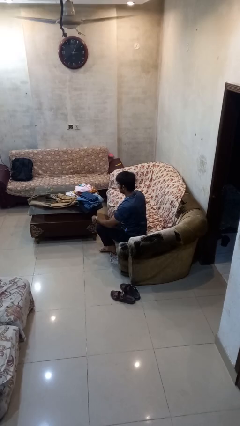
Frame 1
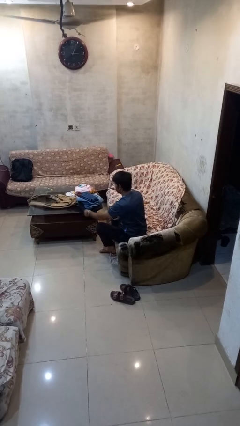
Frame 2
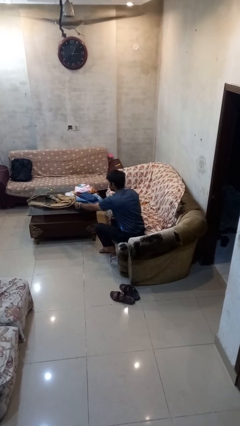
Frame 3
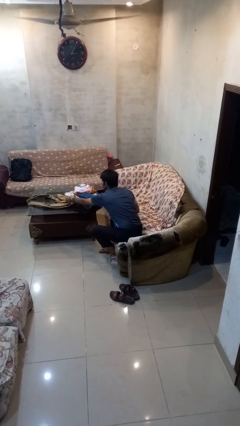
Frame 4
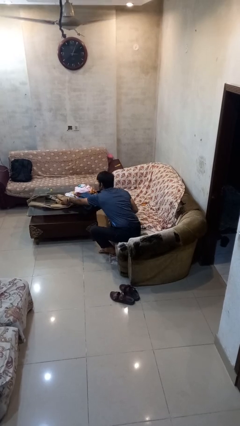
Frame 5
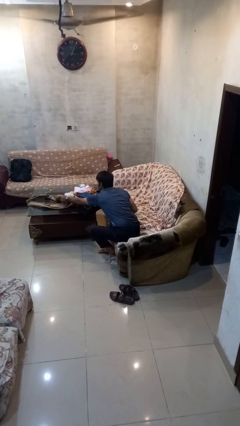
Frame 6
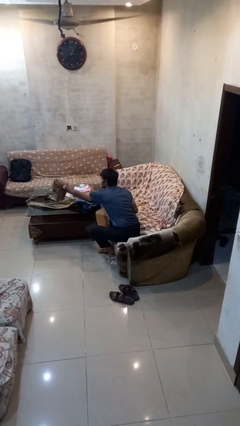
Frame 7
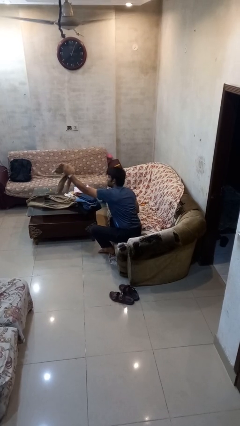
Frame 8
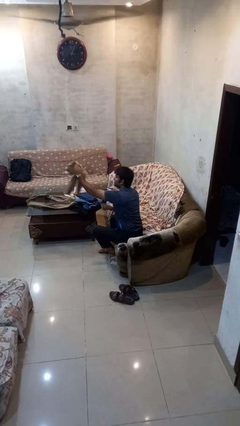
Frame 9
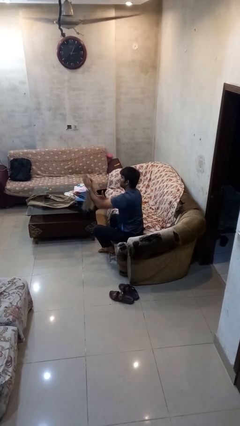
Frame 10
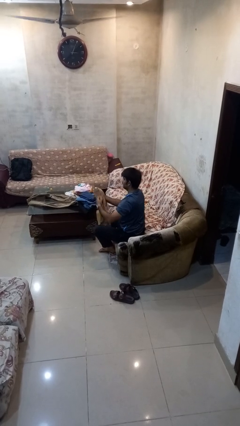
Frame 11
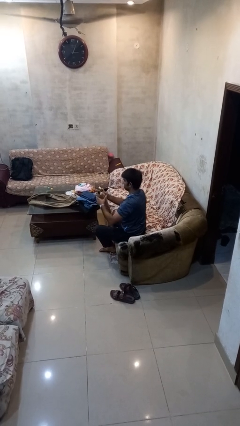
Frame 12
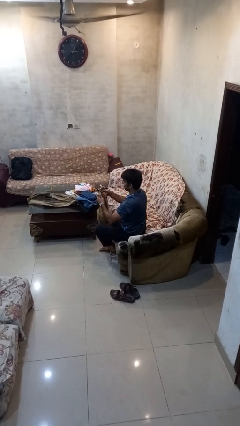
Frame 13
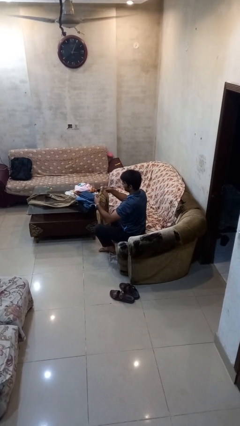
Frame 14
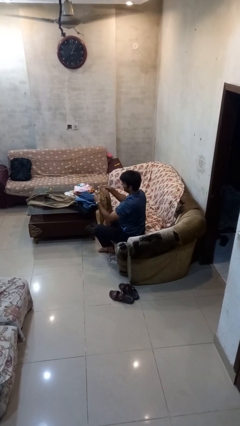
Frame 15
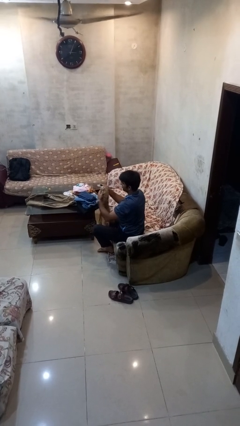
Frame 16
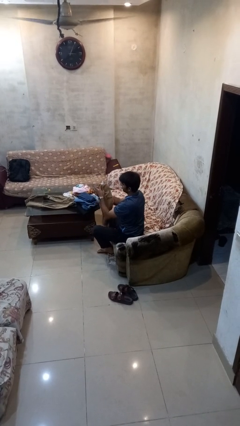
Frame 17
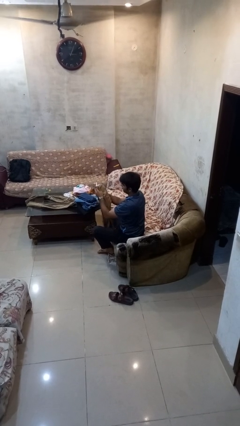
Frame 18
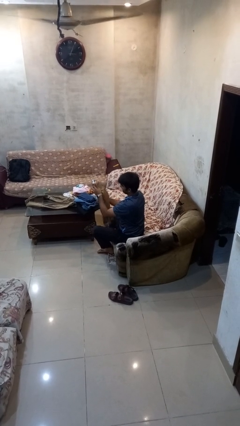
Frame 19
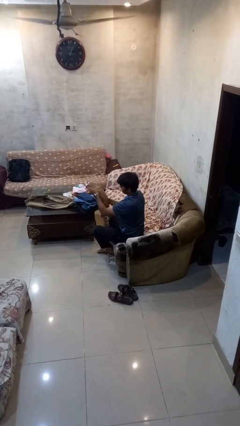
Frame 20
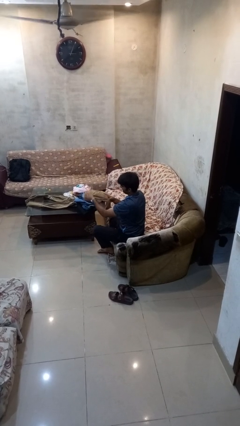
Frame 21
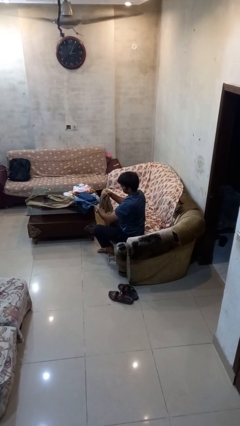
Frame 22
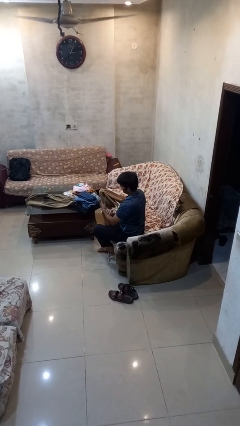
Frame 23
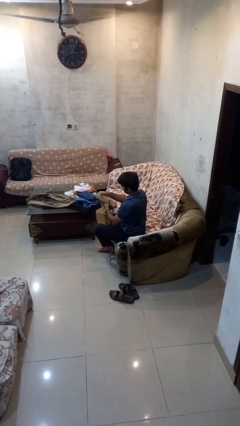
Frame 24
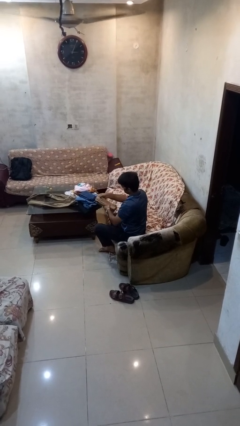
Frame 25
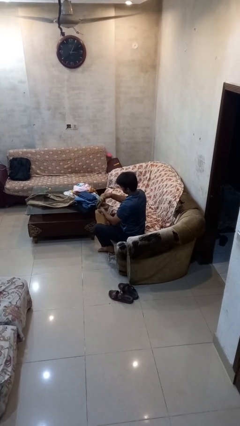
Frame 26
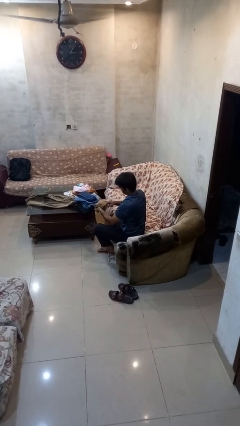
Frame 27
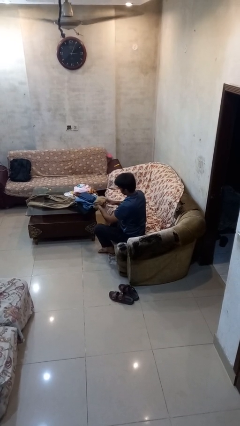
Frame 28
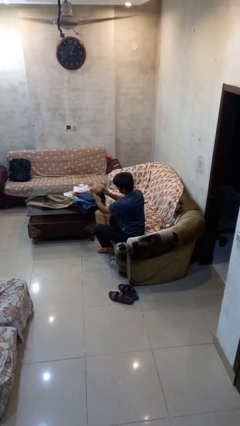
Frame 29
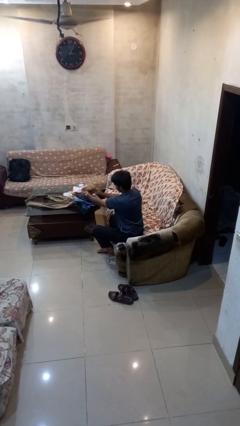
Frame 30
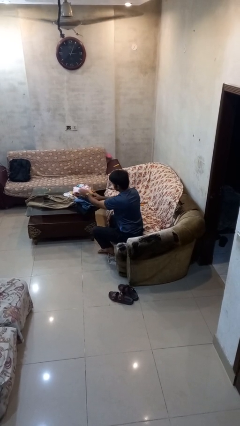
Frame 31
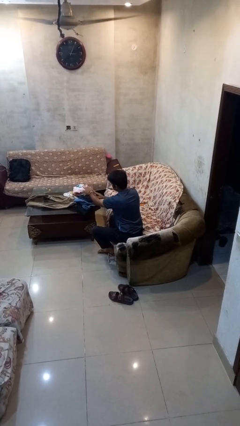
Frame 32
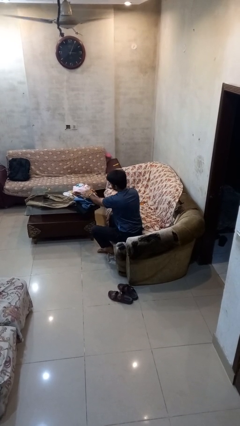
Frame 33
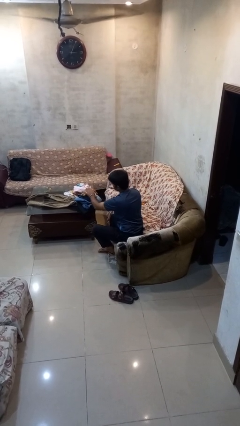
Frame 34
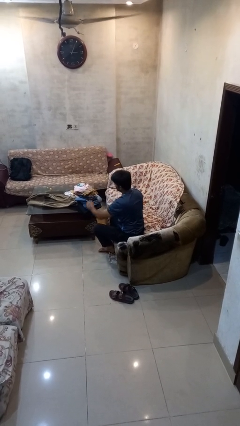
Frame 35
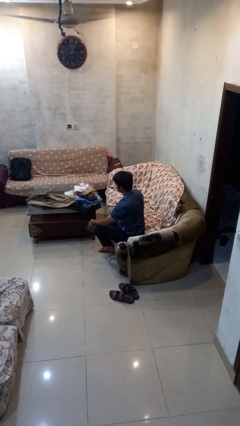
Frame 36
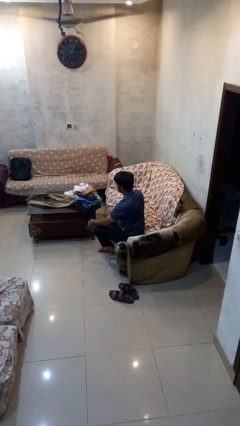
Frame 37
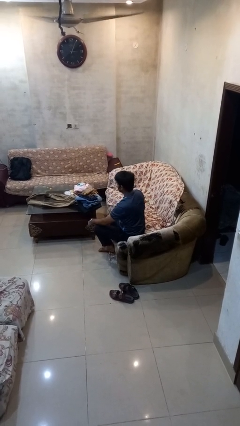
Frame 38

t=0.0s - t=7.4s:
person folds pants

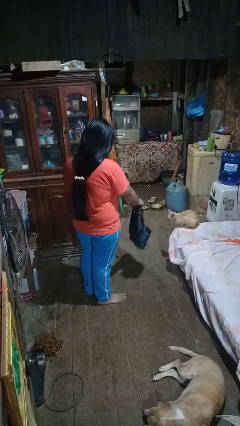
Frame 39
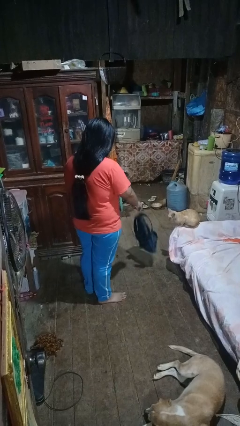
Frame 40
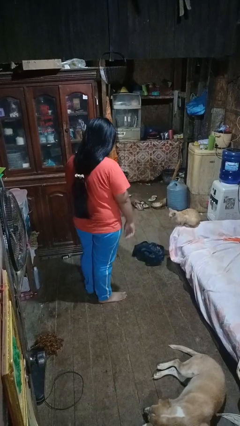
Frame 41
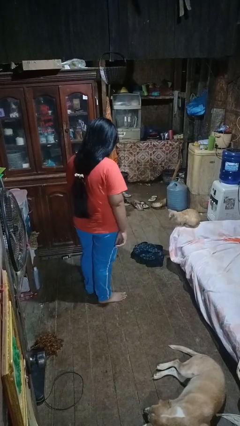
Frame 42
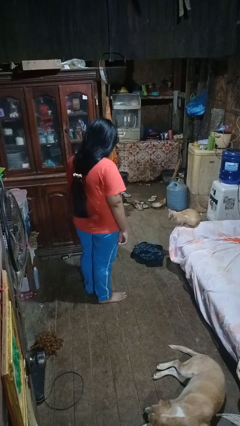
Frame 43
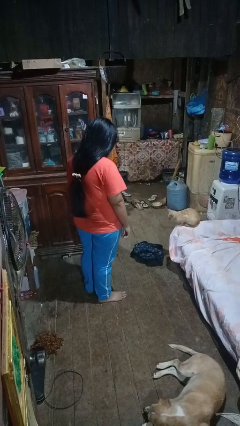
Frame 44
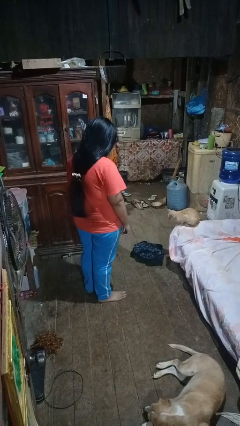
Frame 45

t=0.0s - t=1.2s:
person throws object to ground

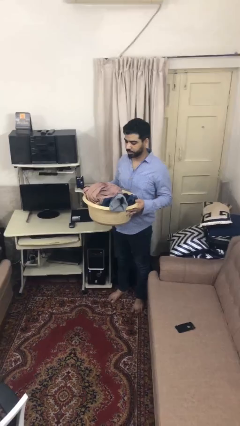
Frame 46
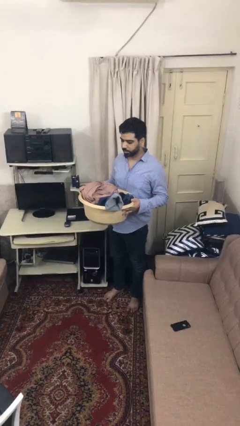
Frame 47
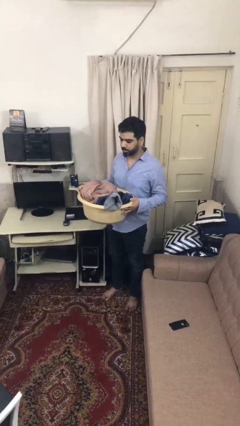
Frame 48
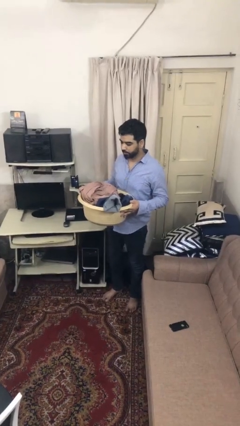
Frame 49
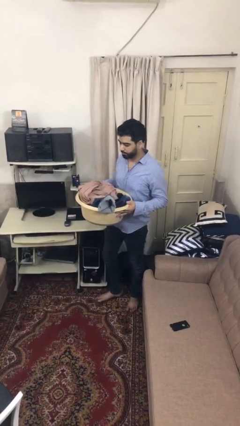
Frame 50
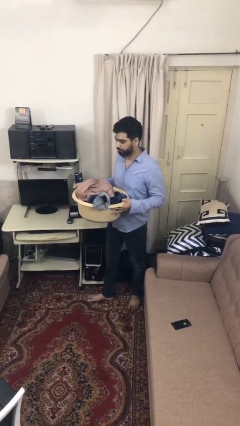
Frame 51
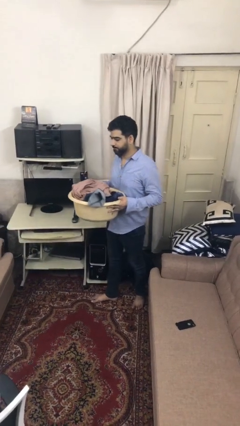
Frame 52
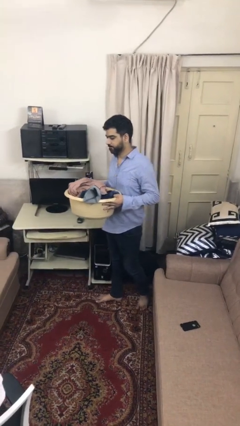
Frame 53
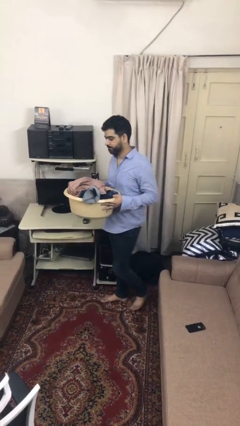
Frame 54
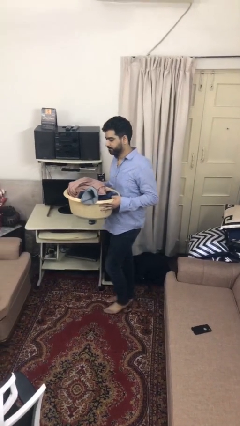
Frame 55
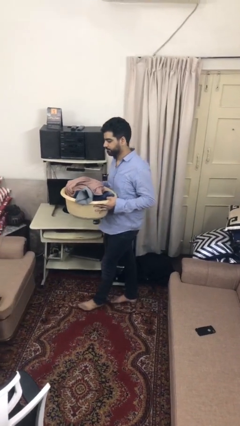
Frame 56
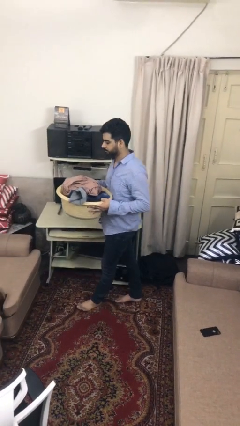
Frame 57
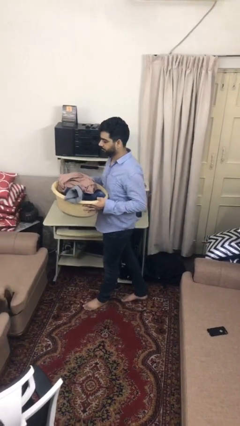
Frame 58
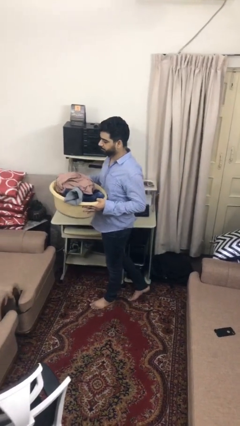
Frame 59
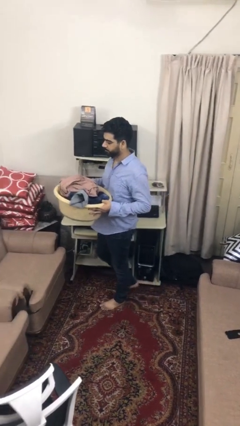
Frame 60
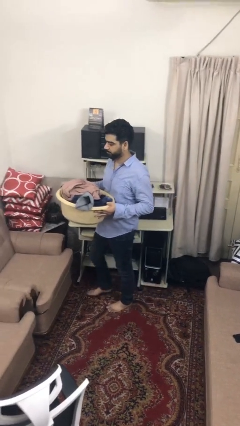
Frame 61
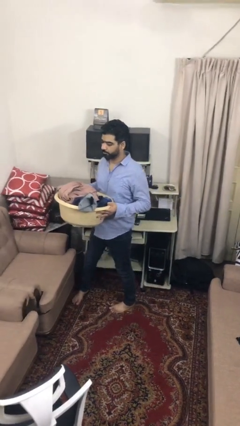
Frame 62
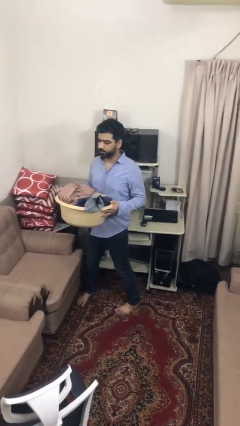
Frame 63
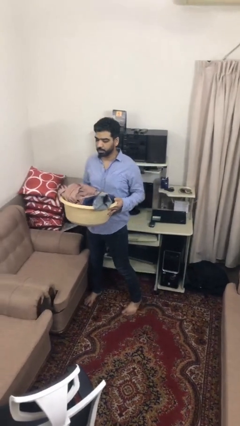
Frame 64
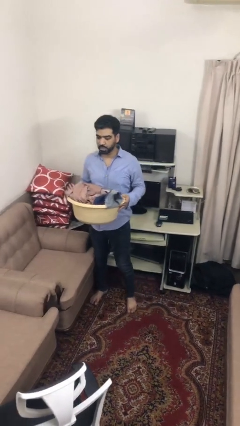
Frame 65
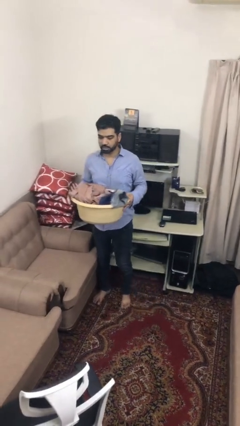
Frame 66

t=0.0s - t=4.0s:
person carries laundry basket

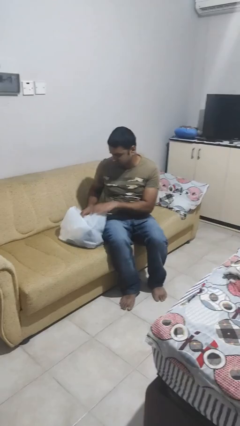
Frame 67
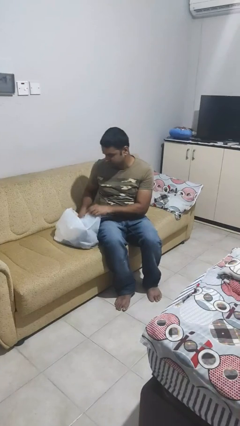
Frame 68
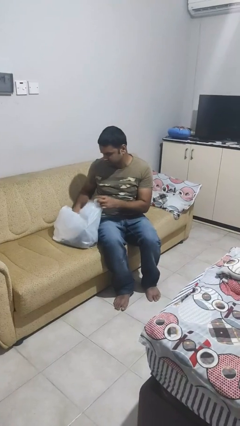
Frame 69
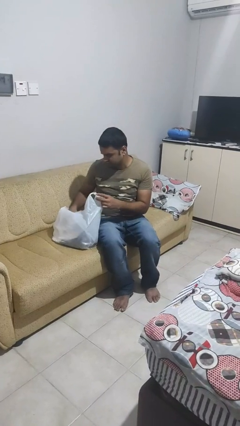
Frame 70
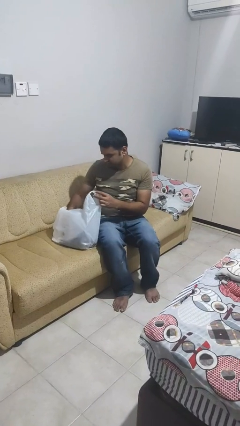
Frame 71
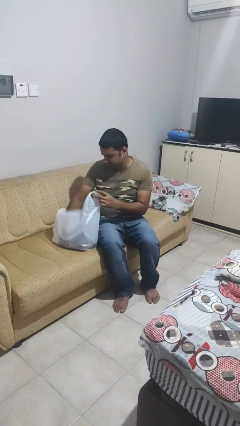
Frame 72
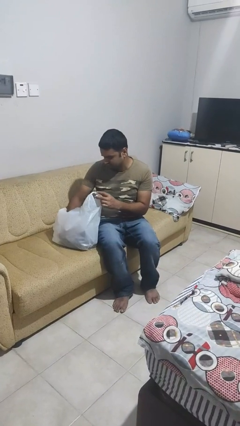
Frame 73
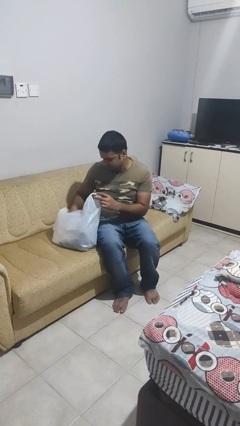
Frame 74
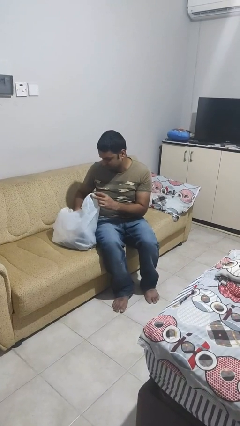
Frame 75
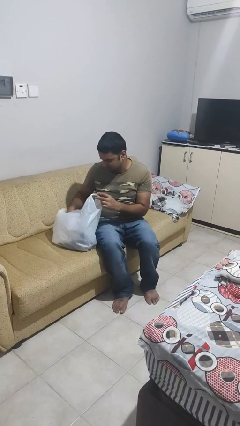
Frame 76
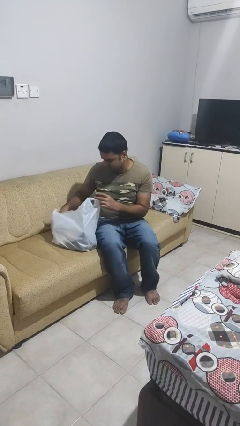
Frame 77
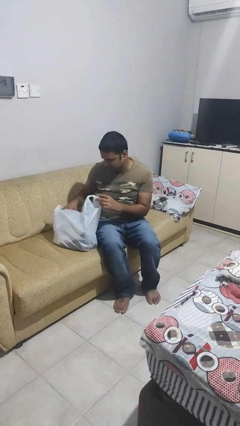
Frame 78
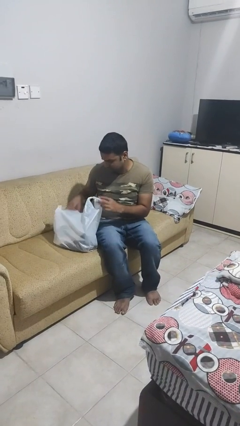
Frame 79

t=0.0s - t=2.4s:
person searches in bag

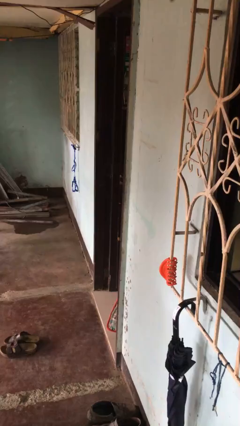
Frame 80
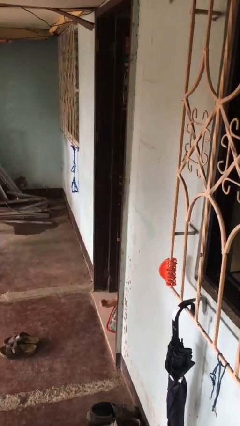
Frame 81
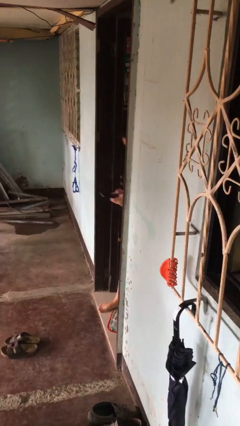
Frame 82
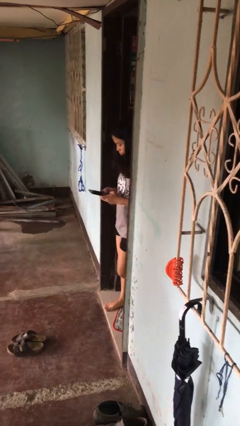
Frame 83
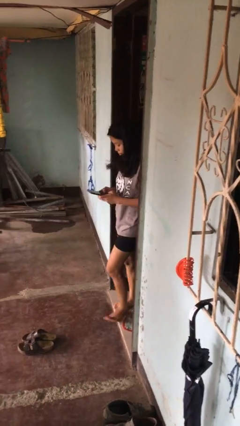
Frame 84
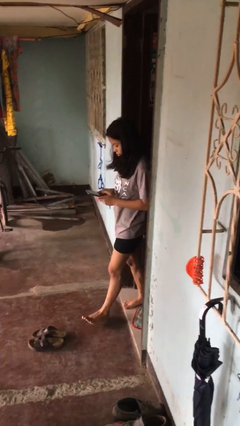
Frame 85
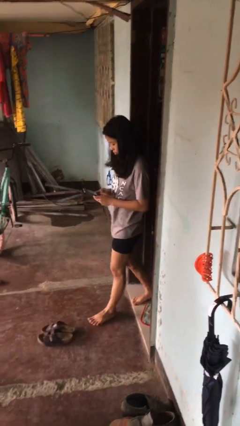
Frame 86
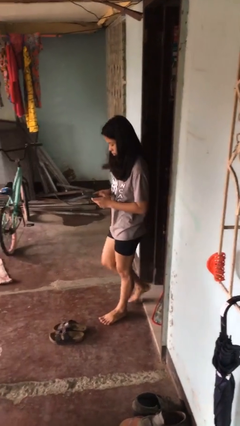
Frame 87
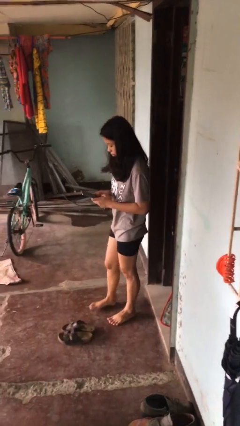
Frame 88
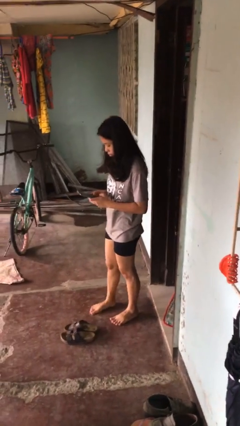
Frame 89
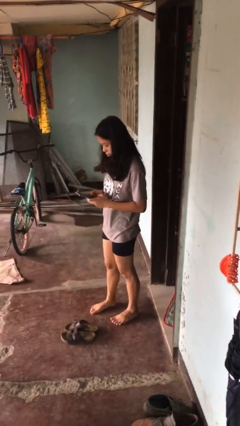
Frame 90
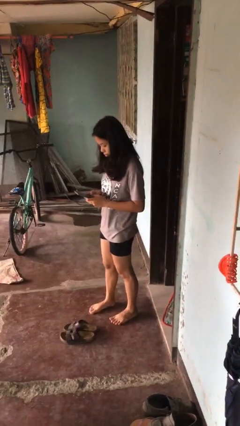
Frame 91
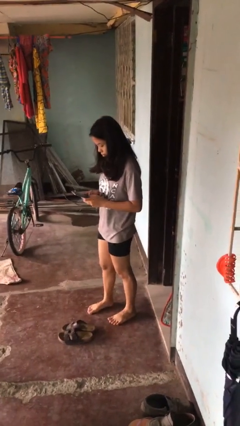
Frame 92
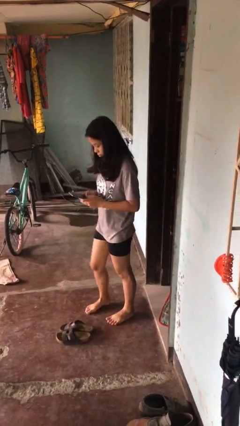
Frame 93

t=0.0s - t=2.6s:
person enters scene through structure
